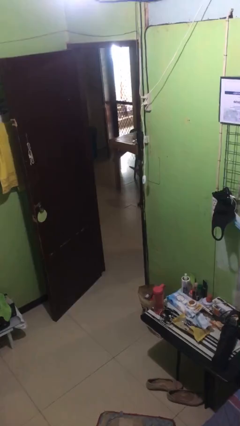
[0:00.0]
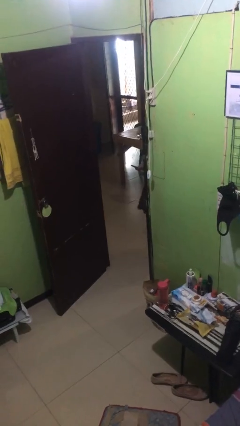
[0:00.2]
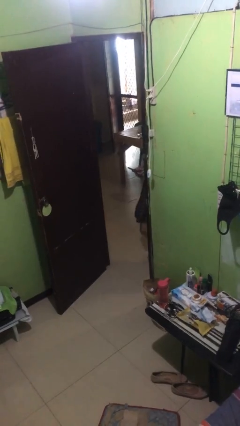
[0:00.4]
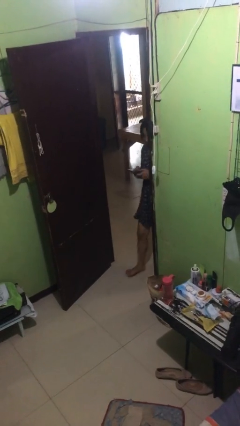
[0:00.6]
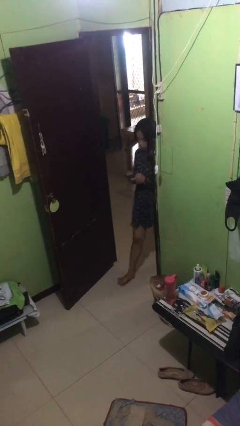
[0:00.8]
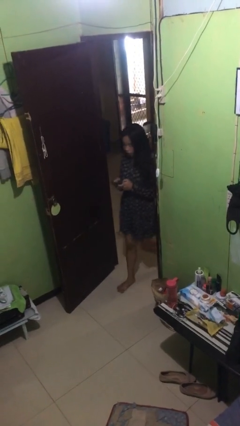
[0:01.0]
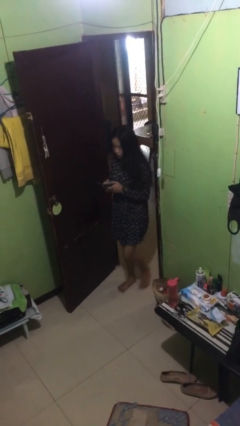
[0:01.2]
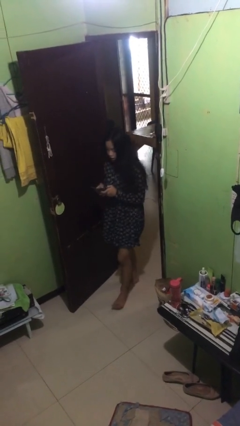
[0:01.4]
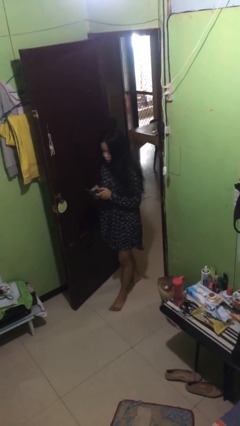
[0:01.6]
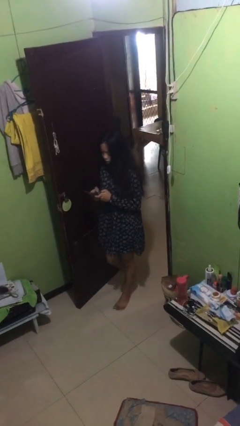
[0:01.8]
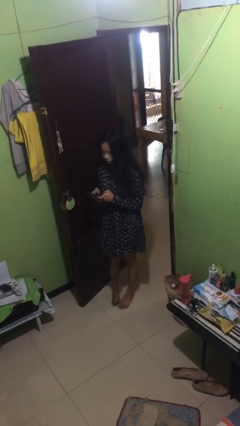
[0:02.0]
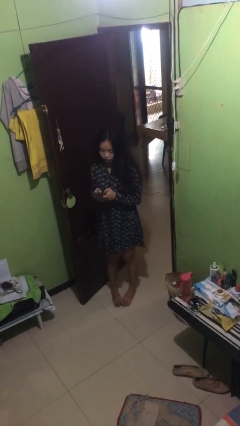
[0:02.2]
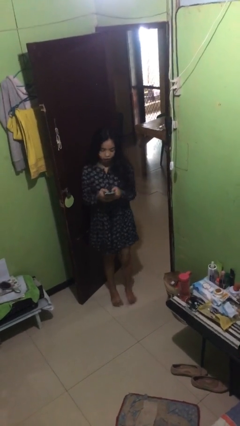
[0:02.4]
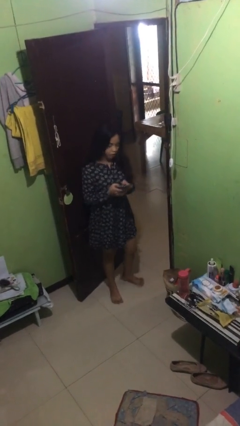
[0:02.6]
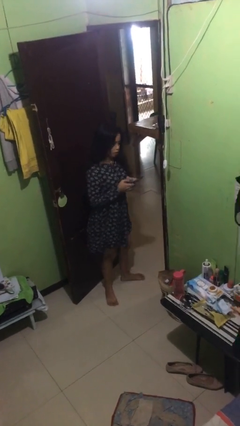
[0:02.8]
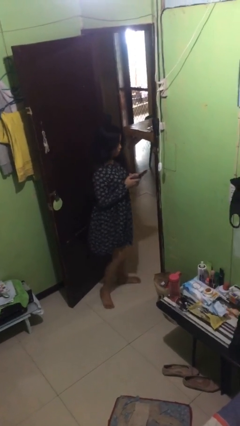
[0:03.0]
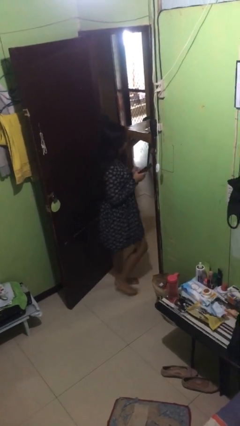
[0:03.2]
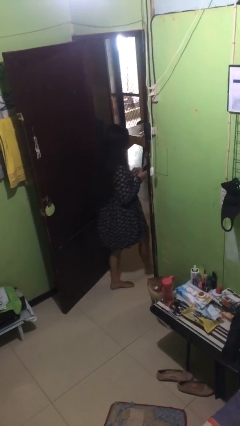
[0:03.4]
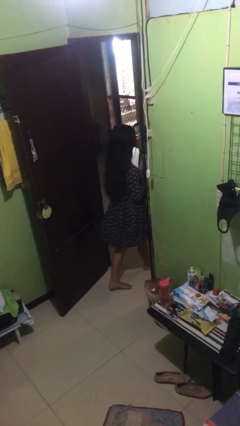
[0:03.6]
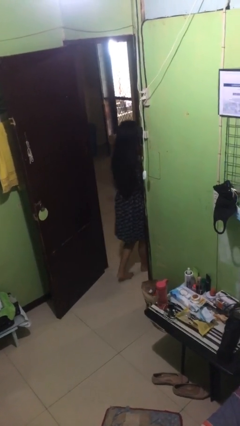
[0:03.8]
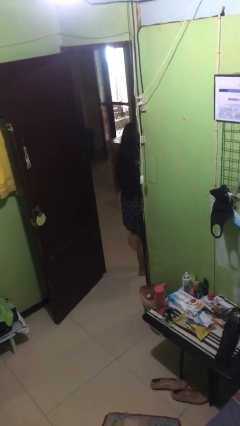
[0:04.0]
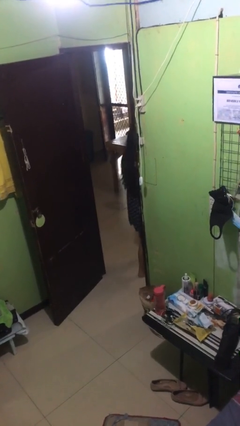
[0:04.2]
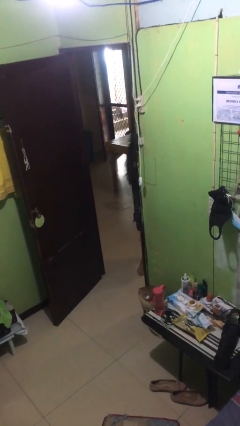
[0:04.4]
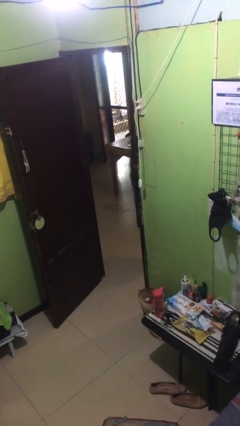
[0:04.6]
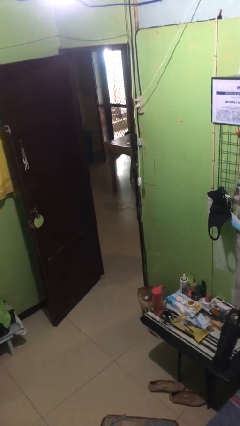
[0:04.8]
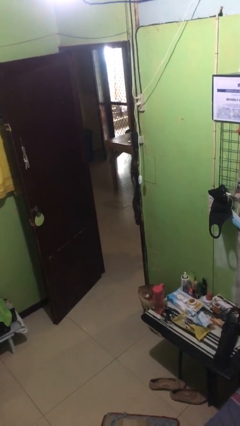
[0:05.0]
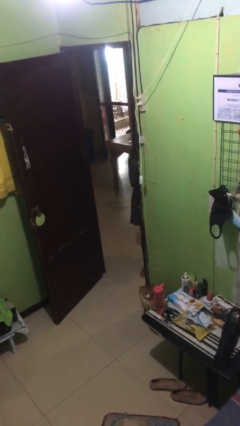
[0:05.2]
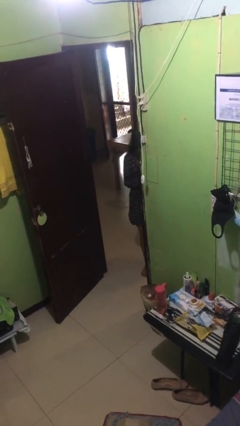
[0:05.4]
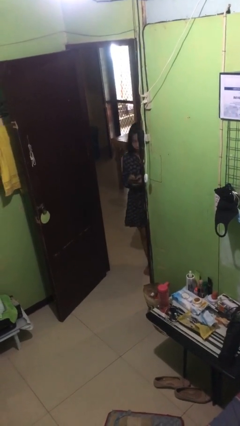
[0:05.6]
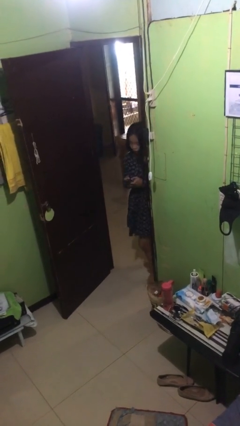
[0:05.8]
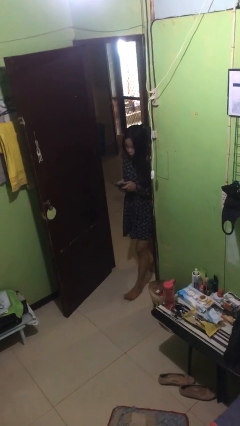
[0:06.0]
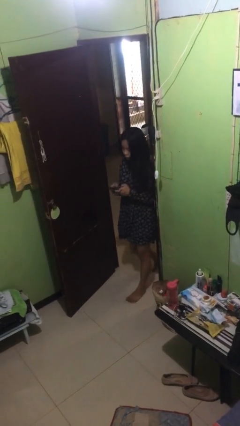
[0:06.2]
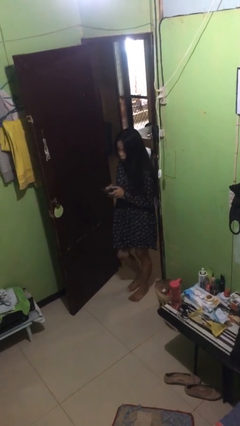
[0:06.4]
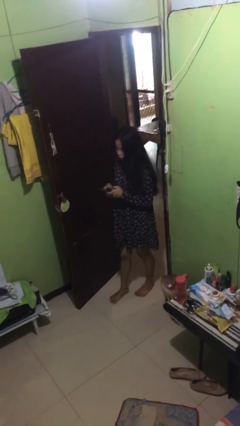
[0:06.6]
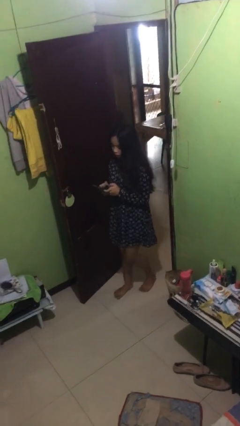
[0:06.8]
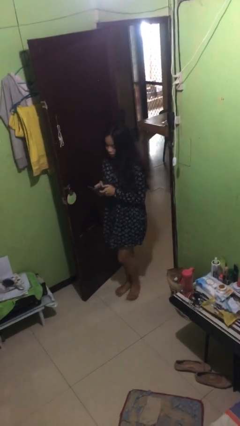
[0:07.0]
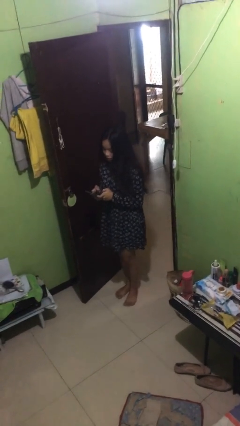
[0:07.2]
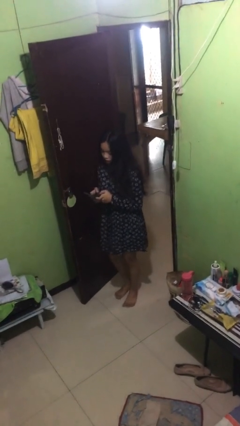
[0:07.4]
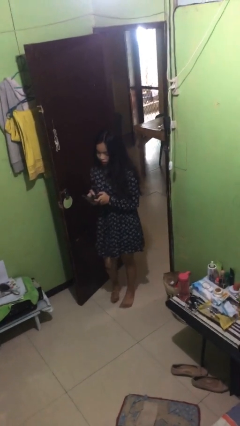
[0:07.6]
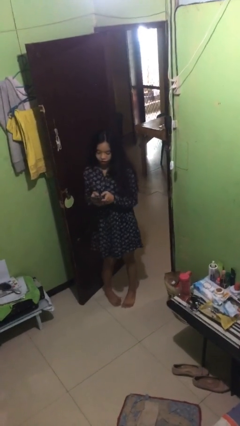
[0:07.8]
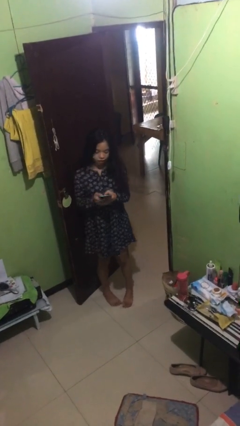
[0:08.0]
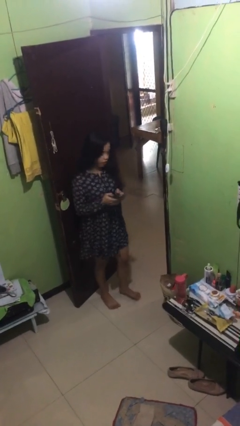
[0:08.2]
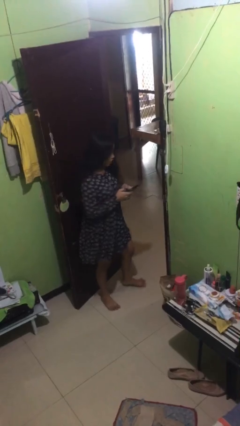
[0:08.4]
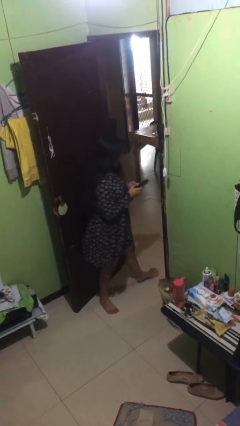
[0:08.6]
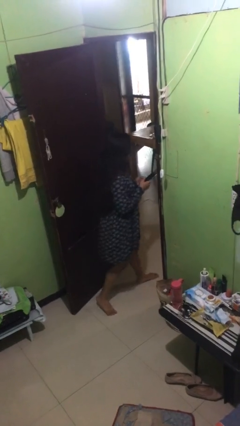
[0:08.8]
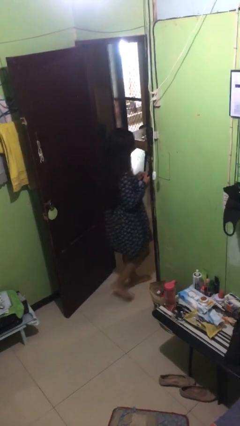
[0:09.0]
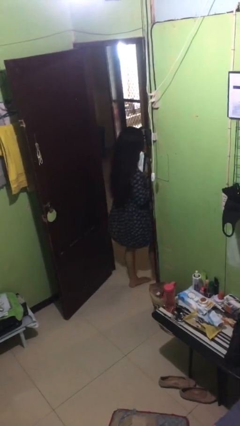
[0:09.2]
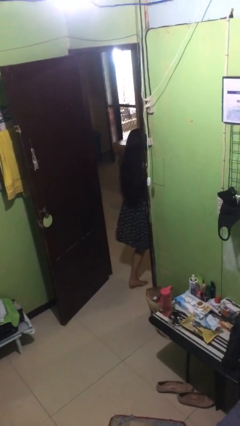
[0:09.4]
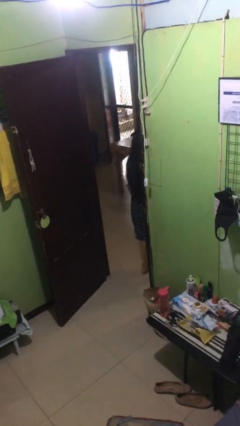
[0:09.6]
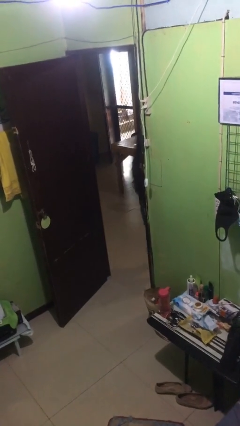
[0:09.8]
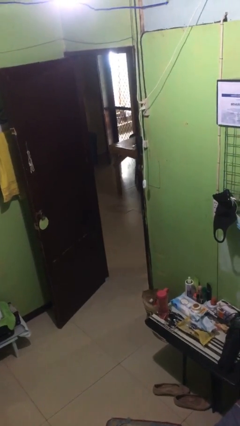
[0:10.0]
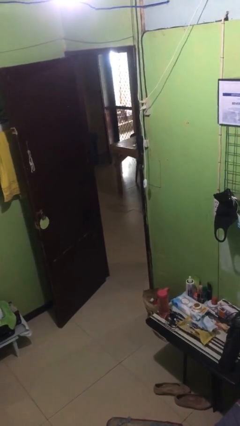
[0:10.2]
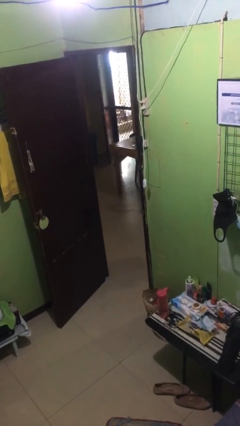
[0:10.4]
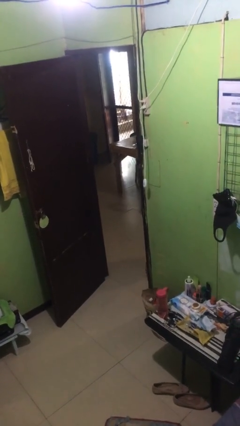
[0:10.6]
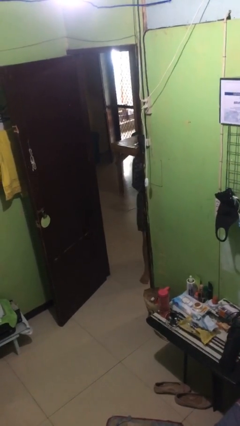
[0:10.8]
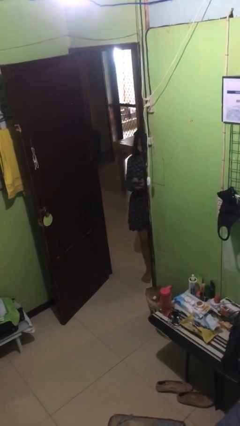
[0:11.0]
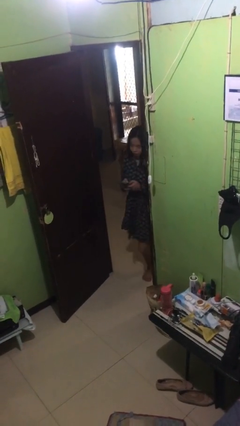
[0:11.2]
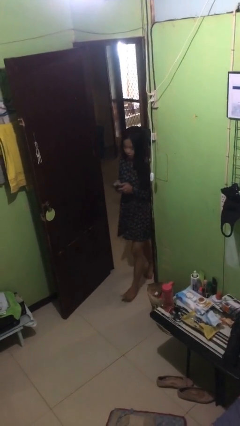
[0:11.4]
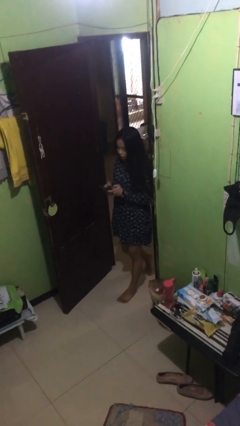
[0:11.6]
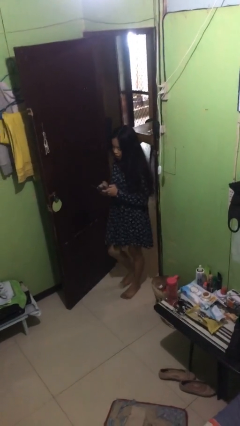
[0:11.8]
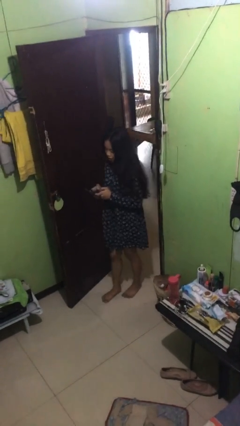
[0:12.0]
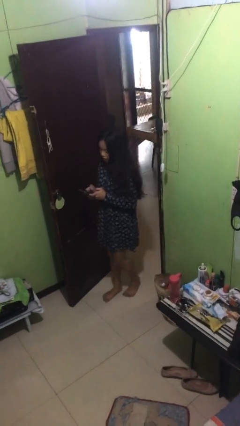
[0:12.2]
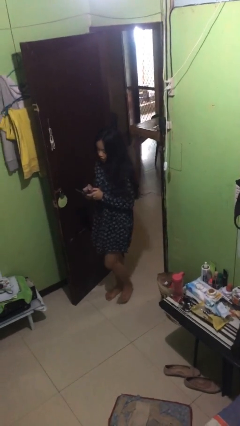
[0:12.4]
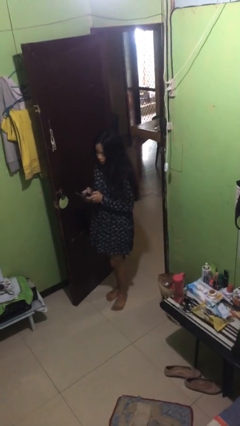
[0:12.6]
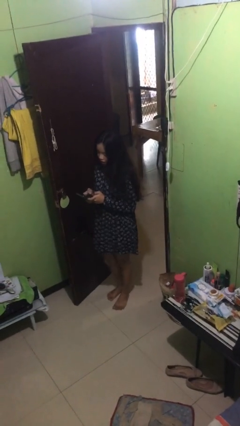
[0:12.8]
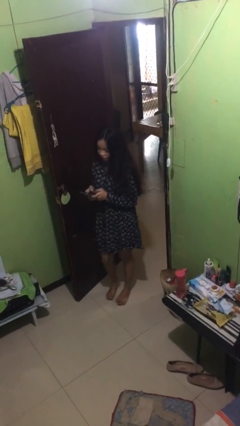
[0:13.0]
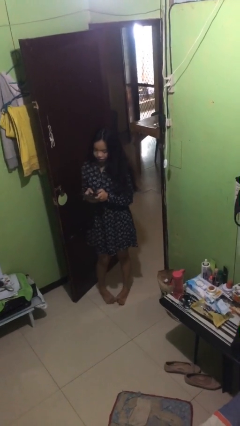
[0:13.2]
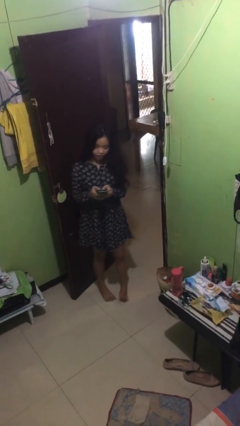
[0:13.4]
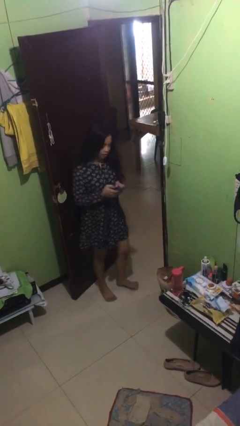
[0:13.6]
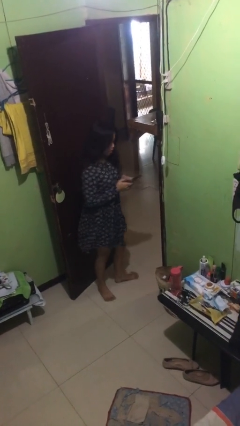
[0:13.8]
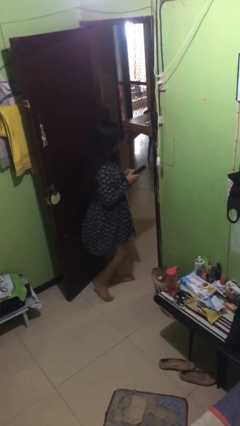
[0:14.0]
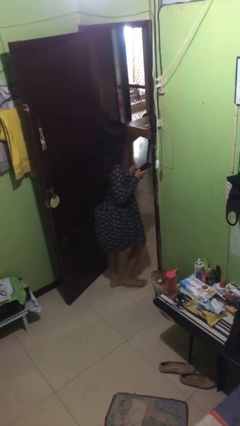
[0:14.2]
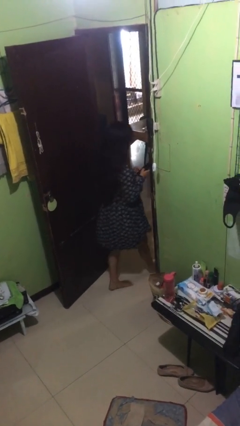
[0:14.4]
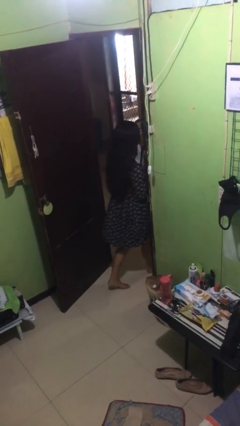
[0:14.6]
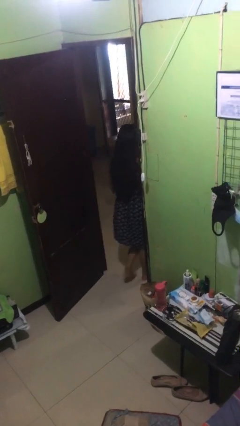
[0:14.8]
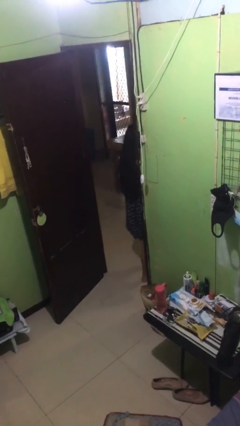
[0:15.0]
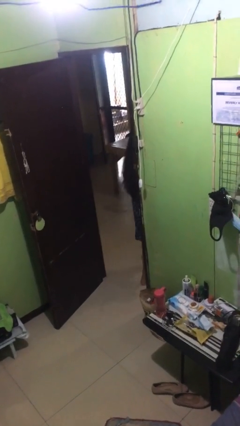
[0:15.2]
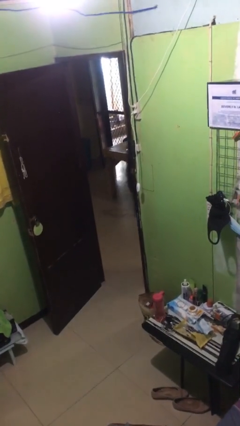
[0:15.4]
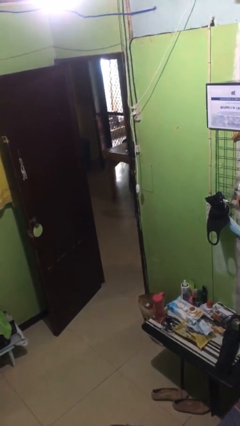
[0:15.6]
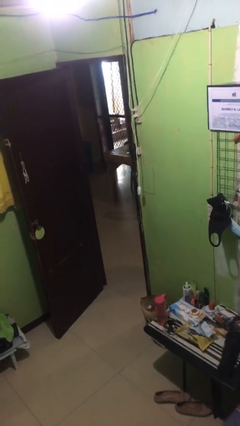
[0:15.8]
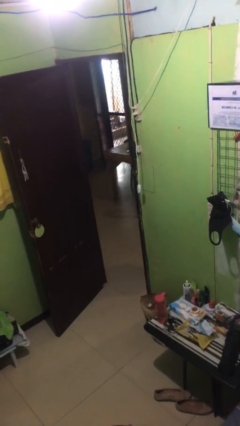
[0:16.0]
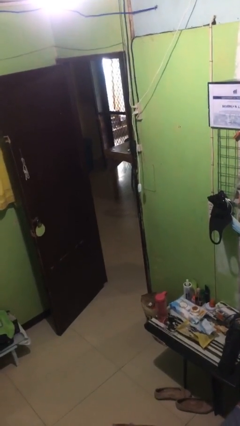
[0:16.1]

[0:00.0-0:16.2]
person texts on phone

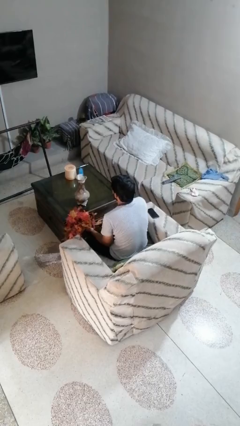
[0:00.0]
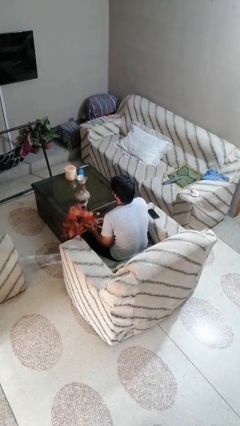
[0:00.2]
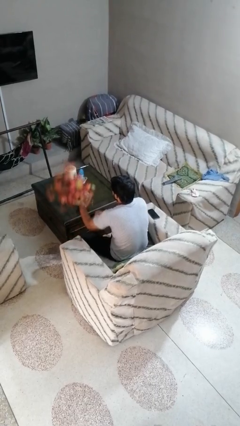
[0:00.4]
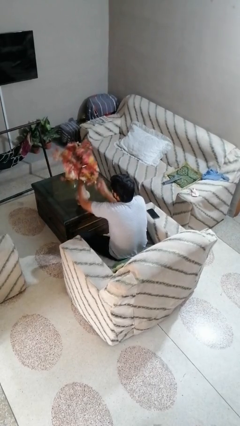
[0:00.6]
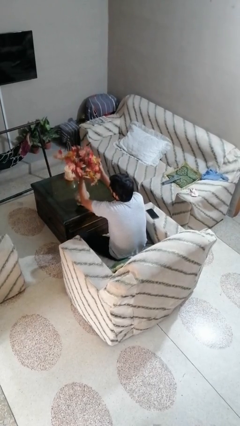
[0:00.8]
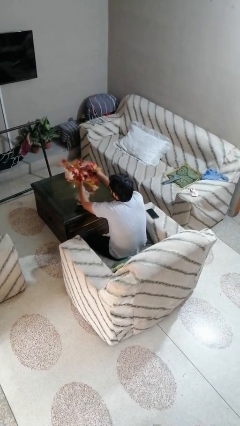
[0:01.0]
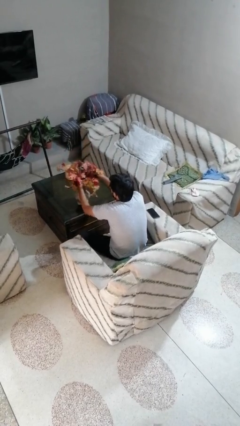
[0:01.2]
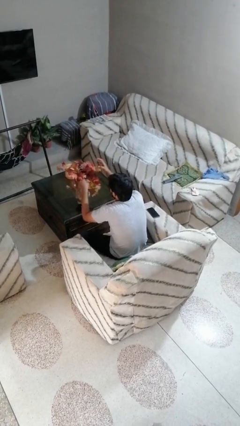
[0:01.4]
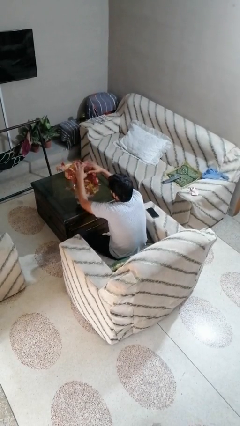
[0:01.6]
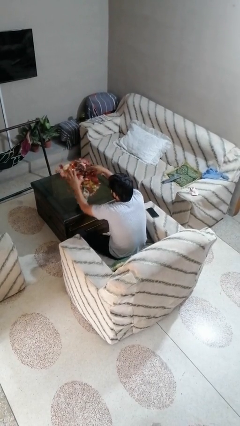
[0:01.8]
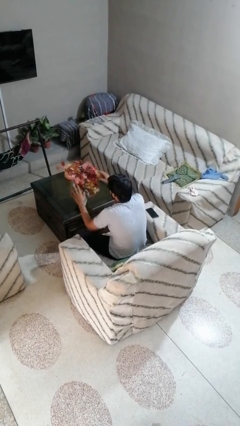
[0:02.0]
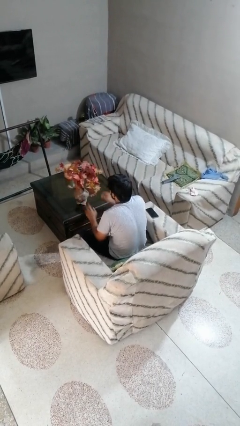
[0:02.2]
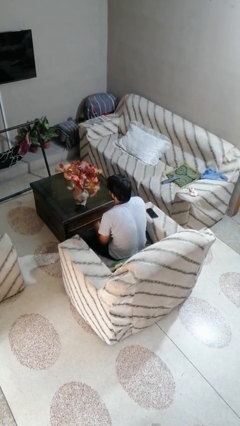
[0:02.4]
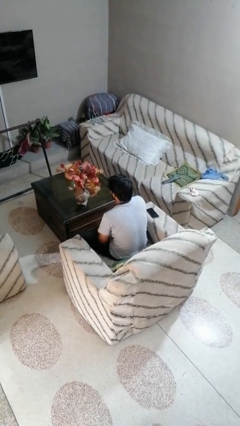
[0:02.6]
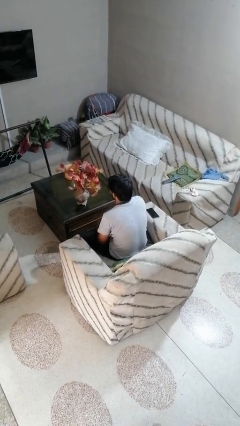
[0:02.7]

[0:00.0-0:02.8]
person arranges flowers in vase
